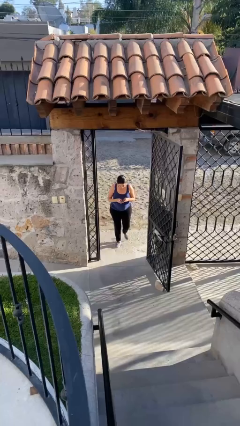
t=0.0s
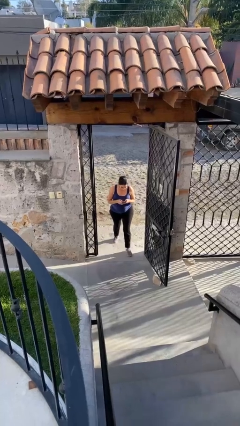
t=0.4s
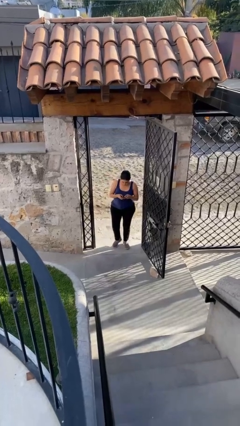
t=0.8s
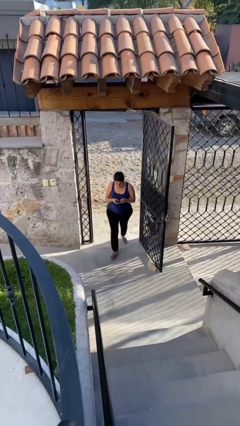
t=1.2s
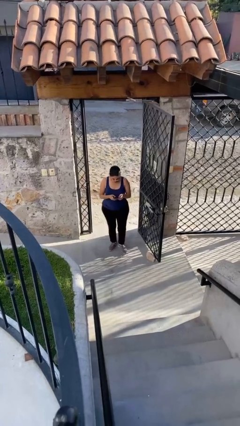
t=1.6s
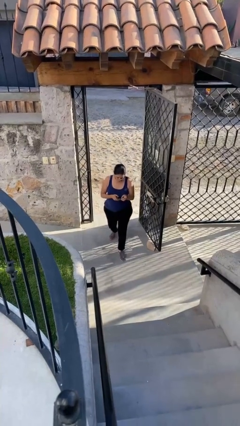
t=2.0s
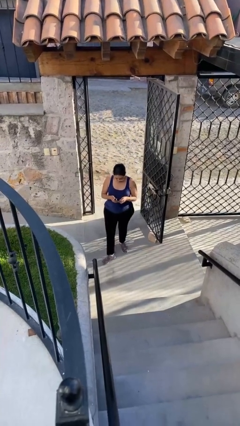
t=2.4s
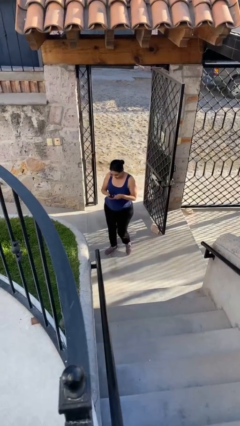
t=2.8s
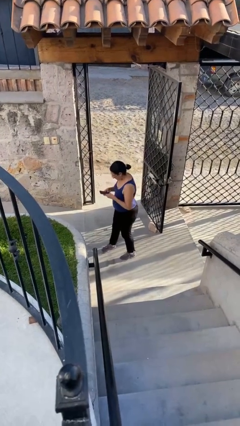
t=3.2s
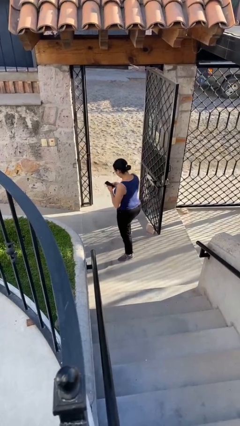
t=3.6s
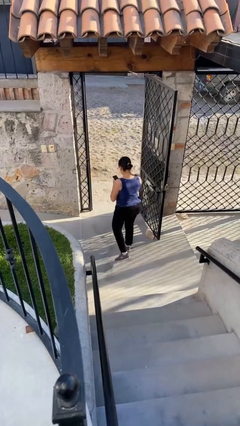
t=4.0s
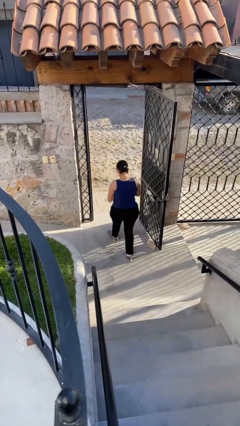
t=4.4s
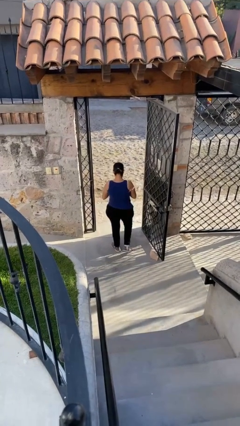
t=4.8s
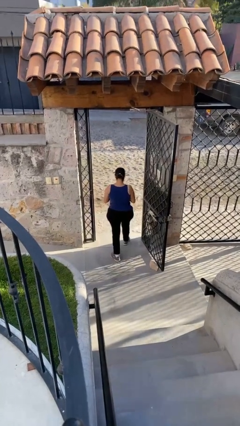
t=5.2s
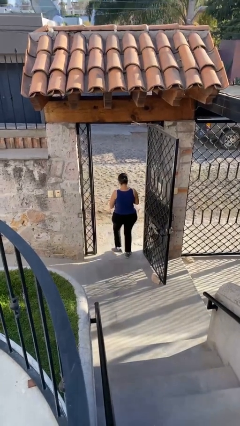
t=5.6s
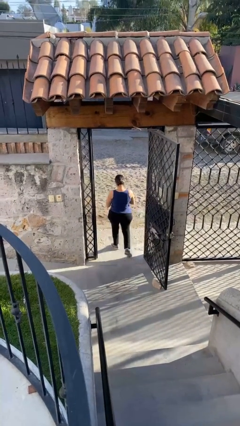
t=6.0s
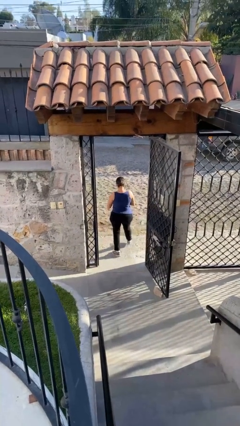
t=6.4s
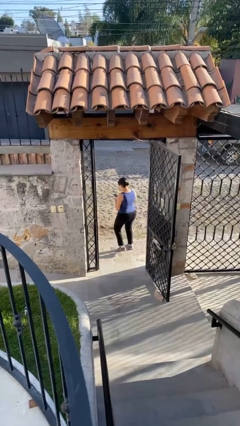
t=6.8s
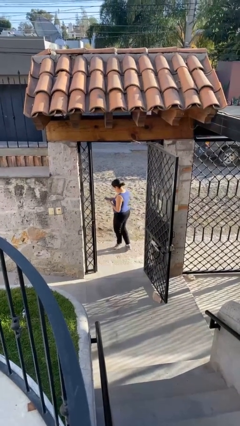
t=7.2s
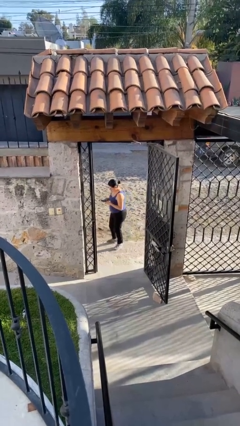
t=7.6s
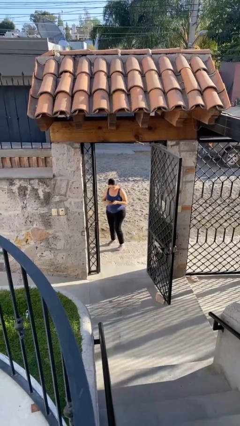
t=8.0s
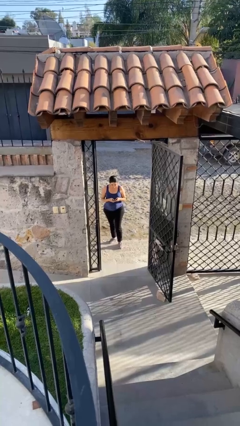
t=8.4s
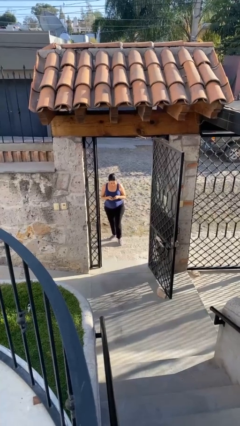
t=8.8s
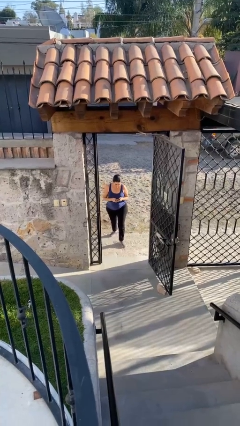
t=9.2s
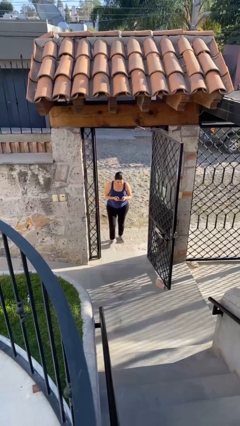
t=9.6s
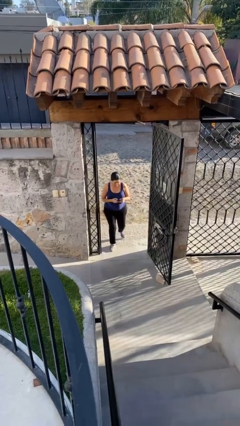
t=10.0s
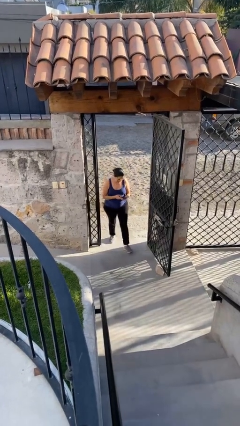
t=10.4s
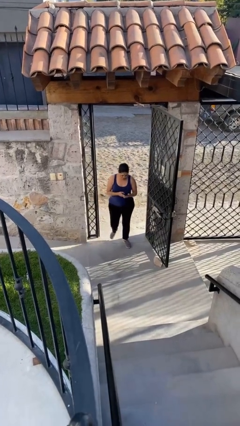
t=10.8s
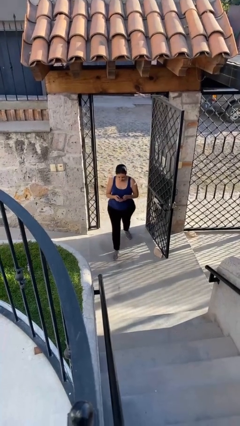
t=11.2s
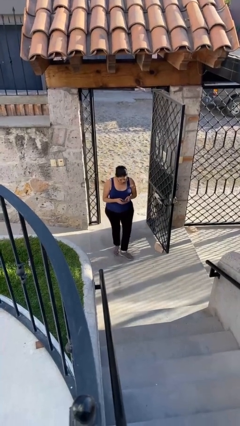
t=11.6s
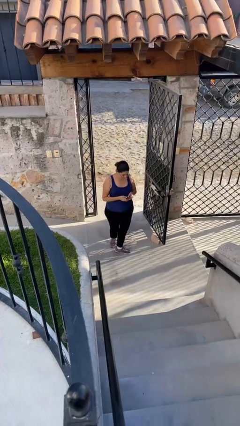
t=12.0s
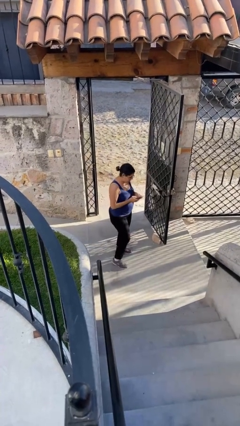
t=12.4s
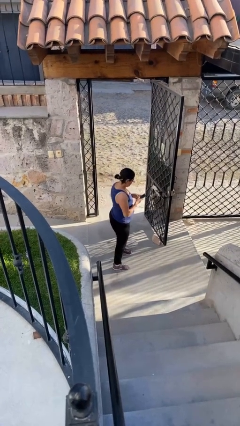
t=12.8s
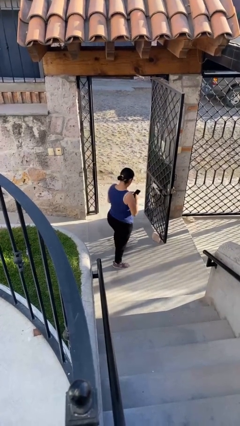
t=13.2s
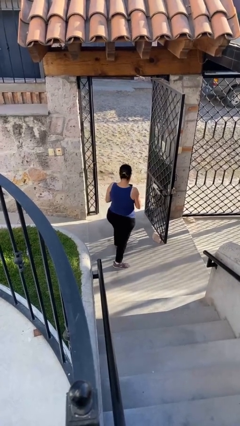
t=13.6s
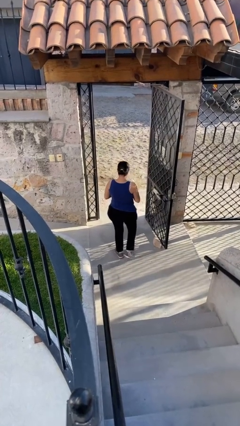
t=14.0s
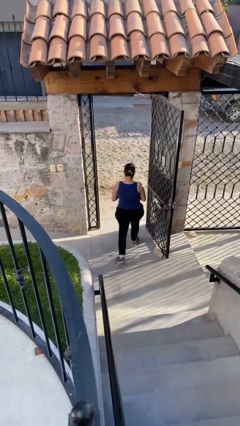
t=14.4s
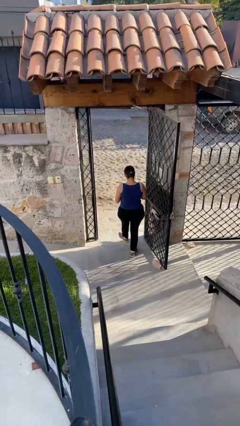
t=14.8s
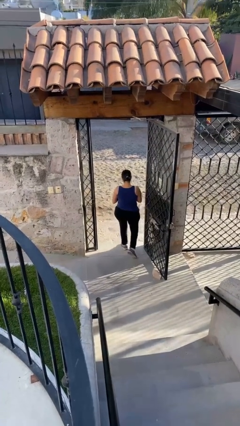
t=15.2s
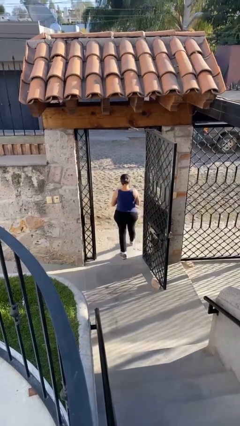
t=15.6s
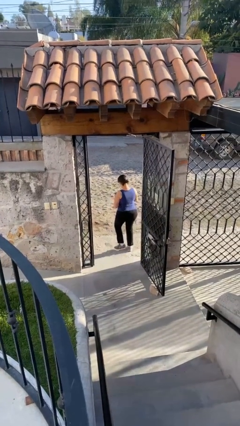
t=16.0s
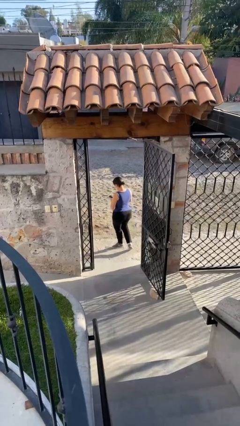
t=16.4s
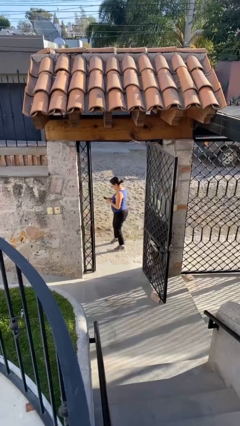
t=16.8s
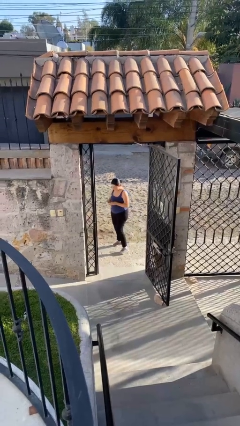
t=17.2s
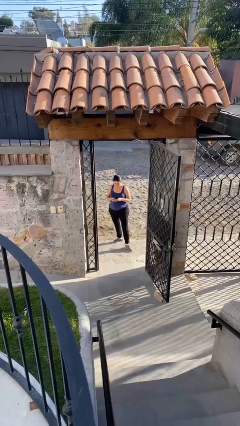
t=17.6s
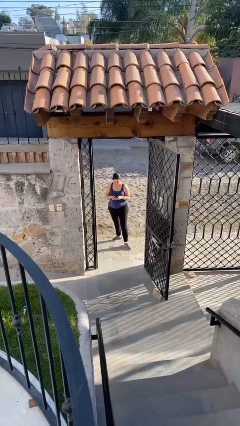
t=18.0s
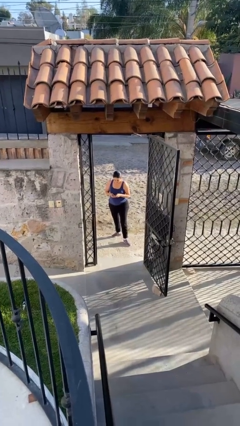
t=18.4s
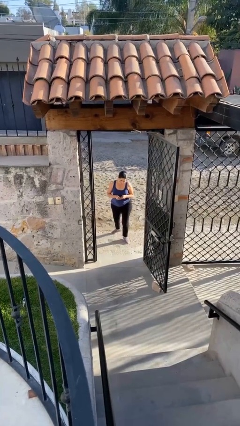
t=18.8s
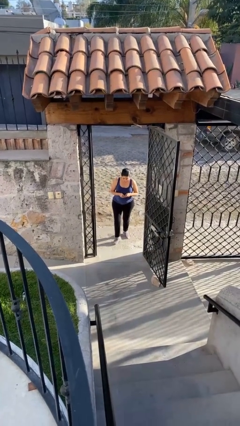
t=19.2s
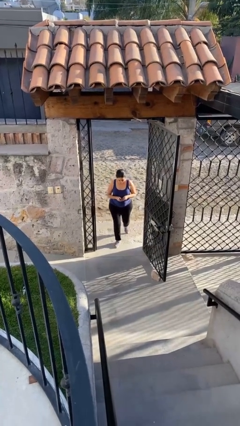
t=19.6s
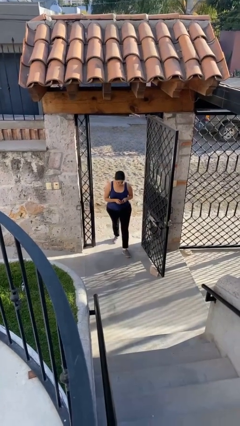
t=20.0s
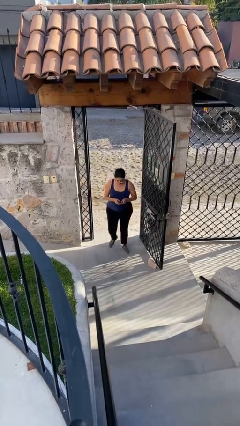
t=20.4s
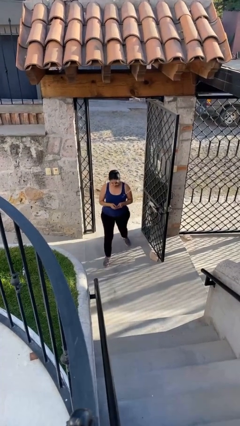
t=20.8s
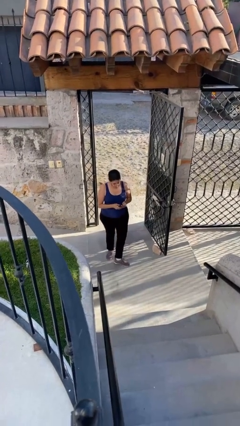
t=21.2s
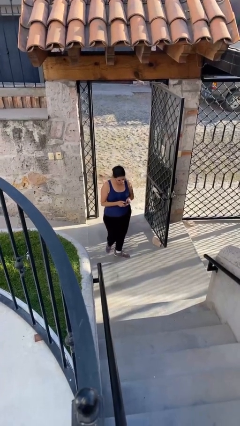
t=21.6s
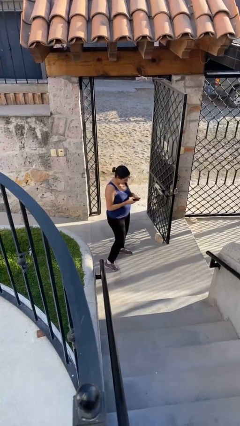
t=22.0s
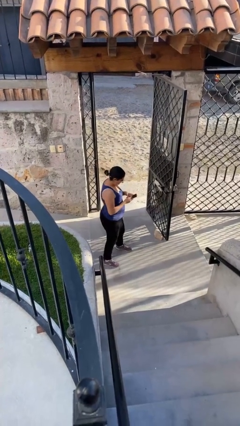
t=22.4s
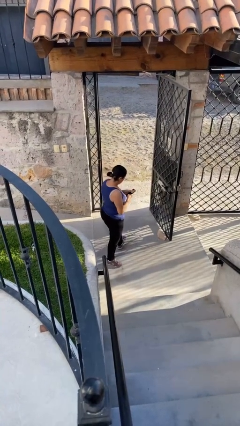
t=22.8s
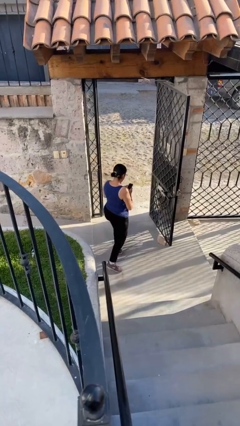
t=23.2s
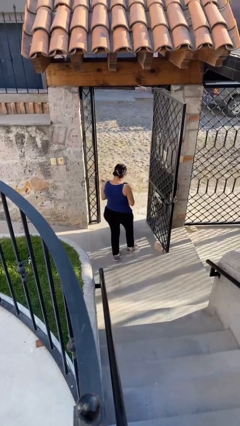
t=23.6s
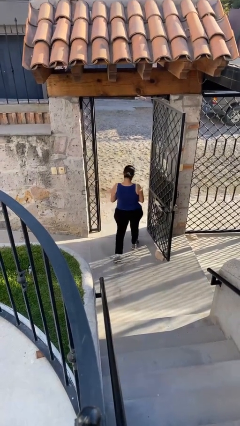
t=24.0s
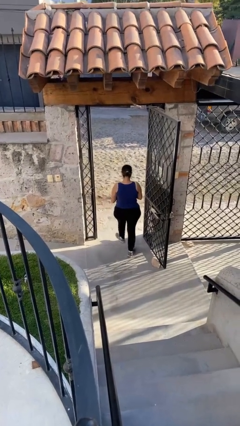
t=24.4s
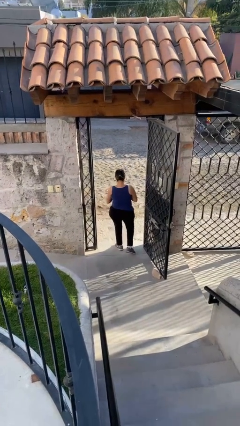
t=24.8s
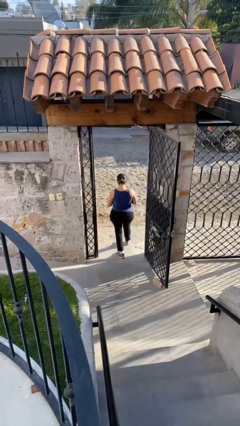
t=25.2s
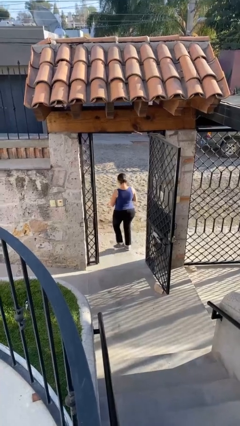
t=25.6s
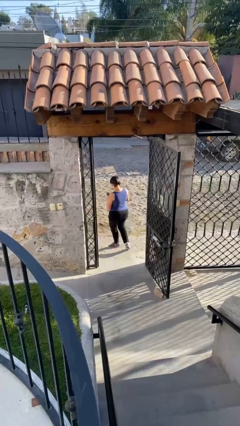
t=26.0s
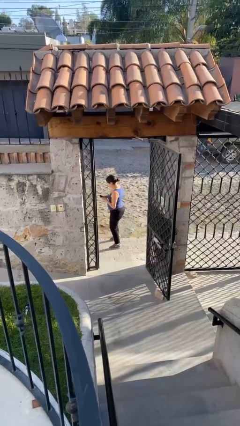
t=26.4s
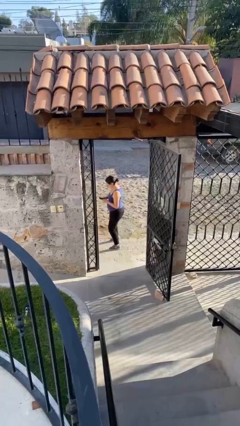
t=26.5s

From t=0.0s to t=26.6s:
person texts on phone

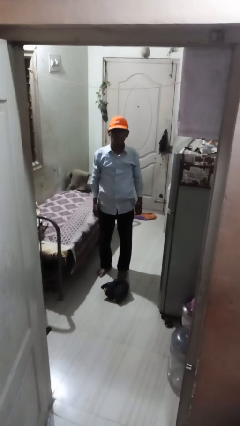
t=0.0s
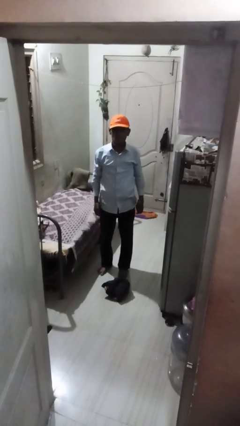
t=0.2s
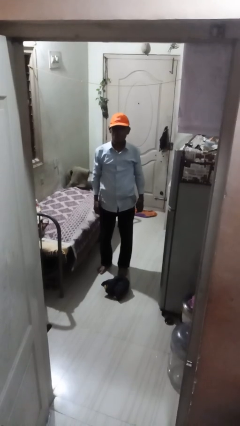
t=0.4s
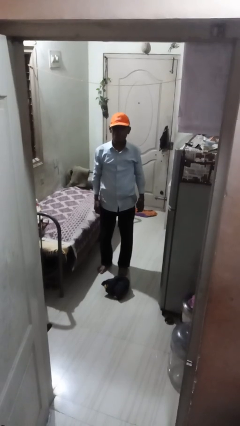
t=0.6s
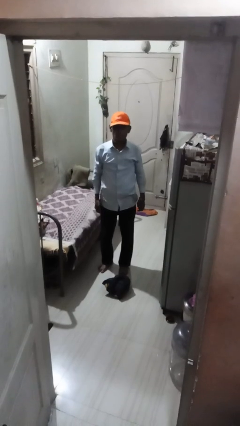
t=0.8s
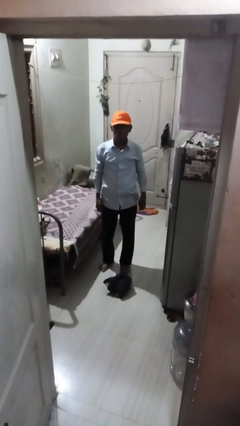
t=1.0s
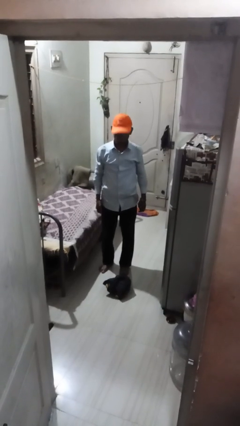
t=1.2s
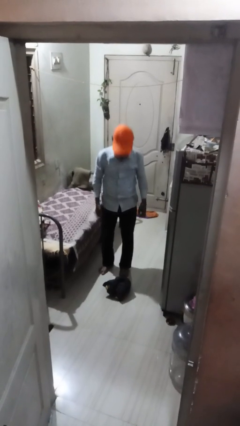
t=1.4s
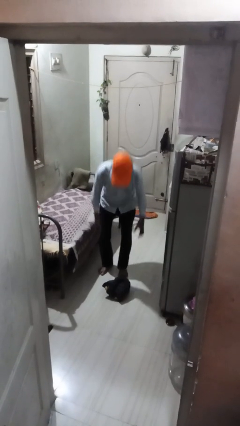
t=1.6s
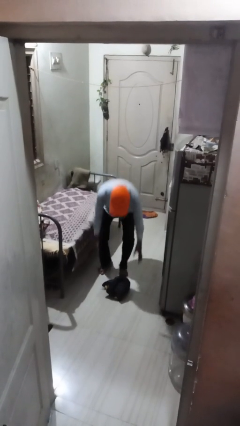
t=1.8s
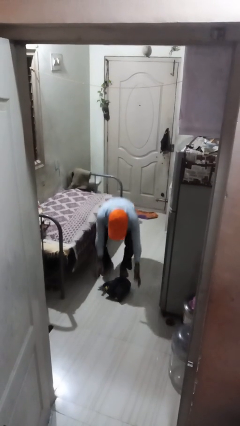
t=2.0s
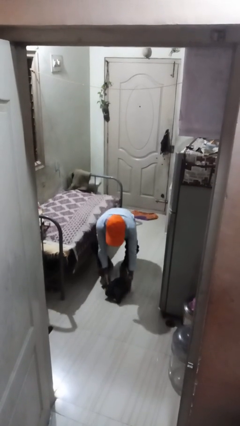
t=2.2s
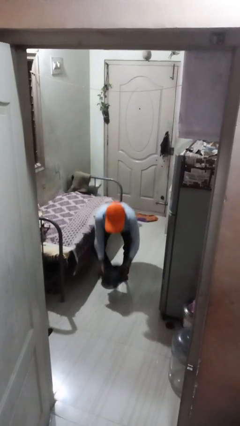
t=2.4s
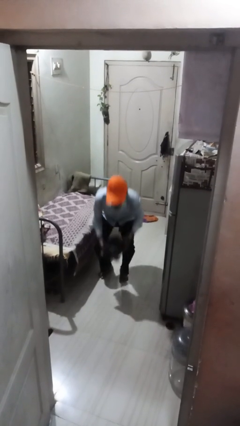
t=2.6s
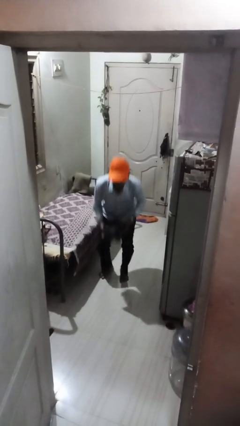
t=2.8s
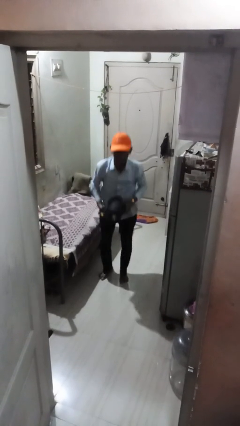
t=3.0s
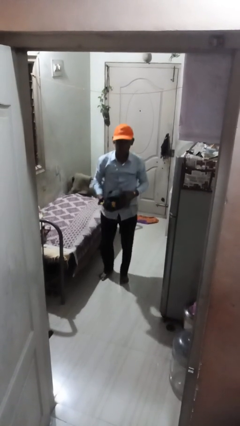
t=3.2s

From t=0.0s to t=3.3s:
person picks up object from floor

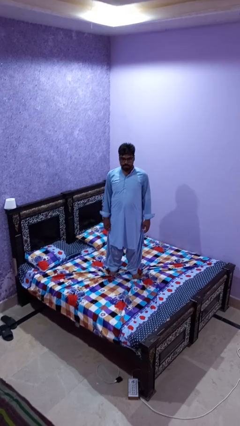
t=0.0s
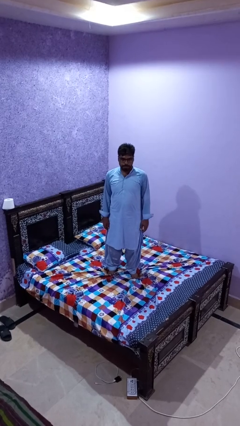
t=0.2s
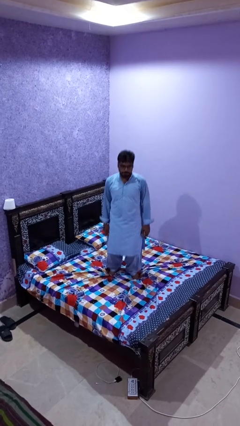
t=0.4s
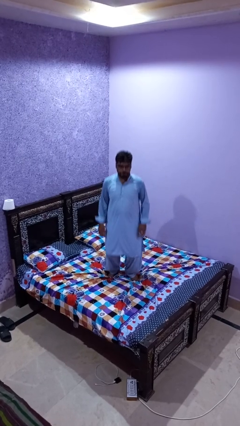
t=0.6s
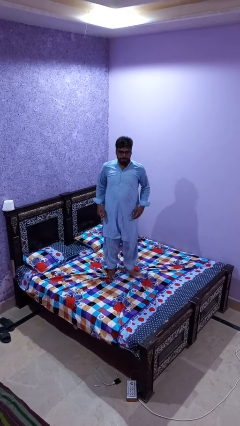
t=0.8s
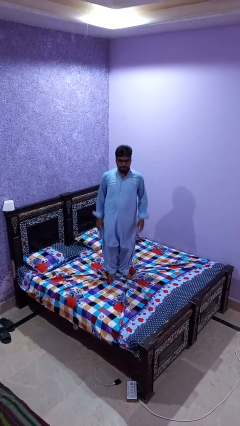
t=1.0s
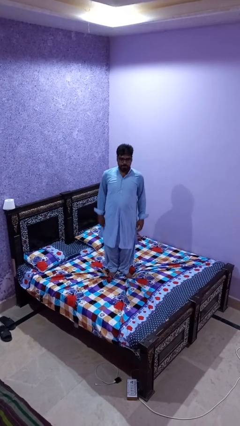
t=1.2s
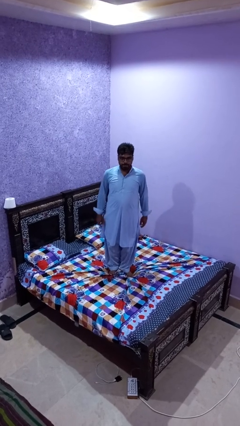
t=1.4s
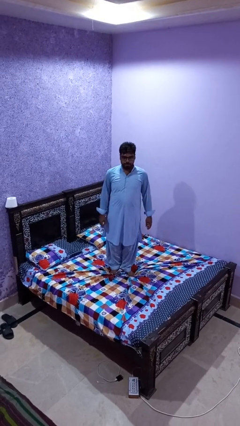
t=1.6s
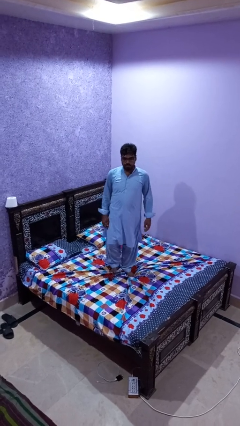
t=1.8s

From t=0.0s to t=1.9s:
person jumps on bed
